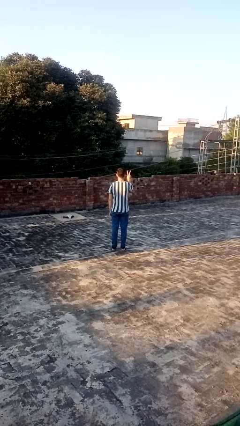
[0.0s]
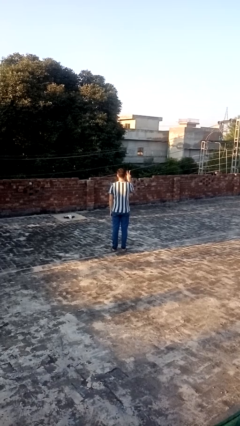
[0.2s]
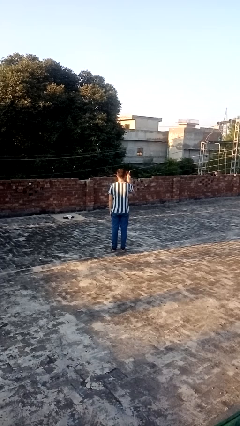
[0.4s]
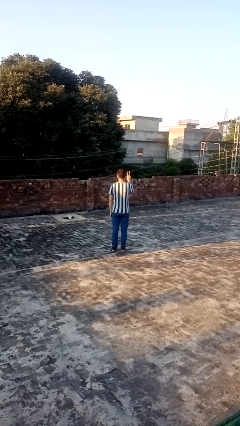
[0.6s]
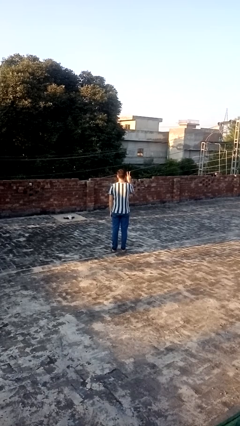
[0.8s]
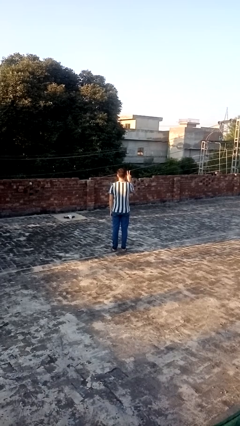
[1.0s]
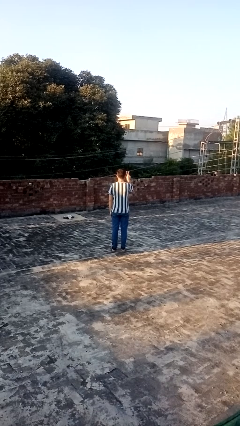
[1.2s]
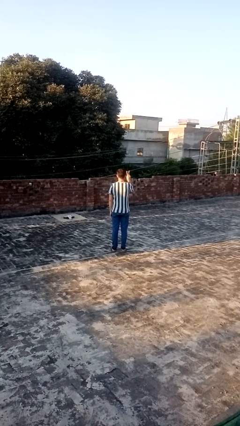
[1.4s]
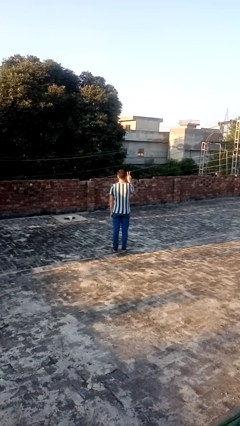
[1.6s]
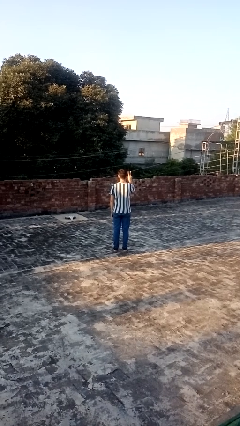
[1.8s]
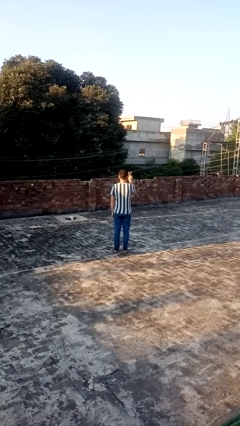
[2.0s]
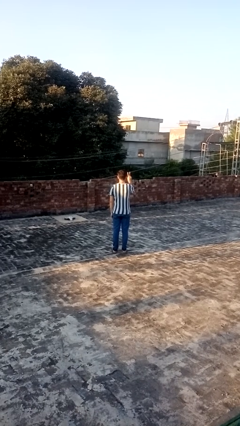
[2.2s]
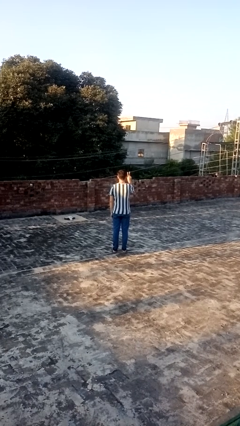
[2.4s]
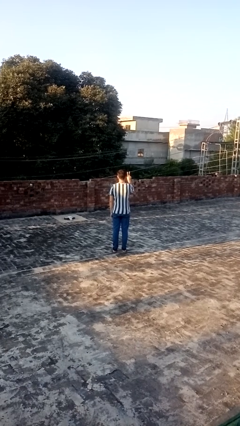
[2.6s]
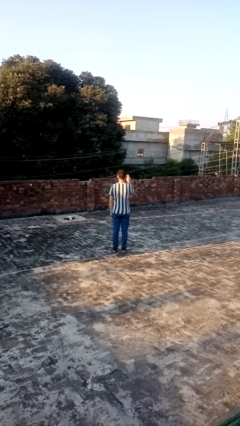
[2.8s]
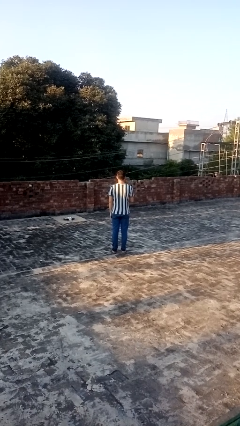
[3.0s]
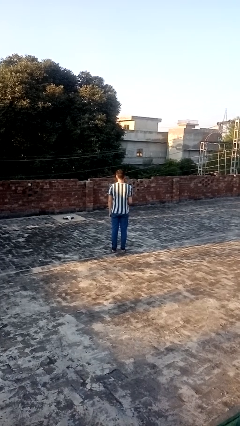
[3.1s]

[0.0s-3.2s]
person gestures peace

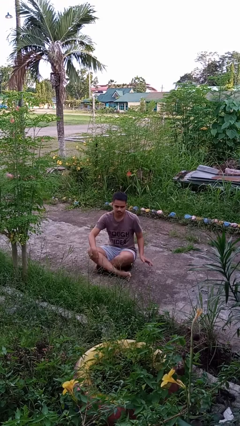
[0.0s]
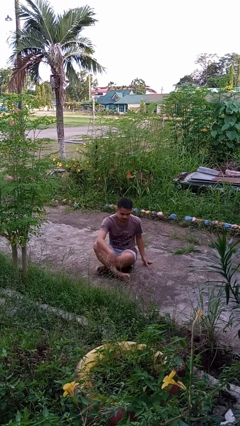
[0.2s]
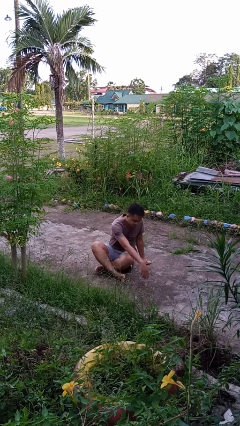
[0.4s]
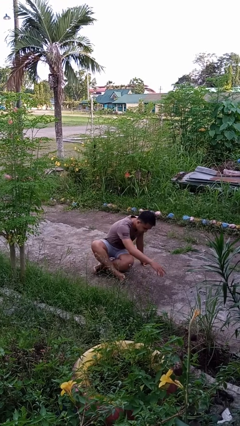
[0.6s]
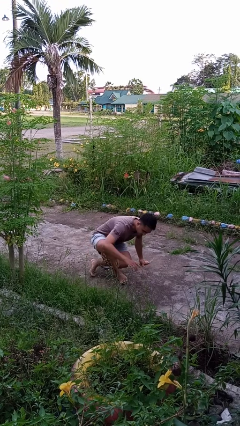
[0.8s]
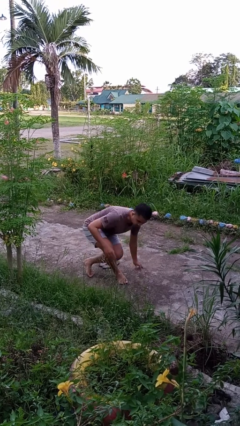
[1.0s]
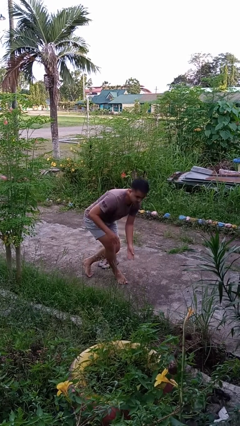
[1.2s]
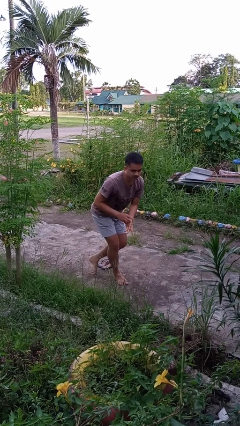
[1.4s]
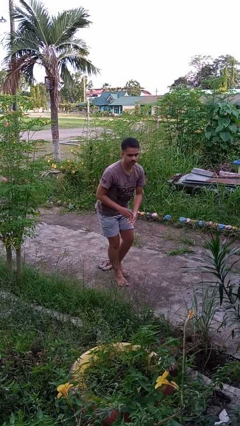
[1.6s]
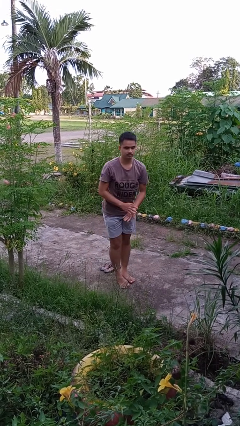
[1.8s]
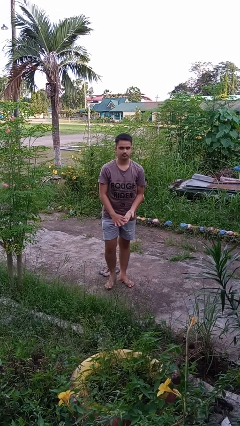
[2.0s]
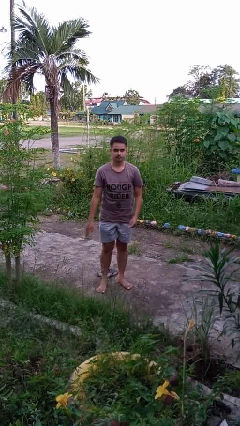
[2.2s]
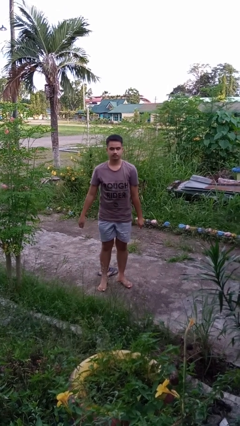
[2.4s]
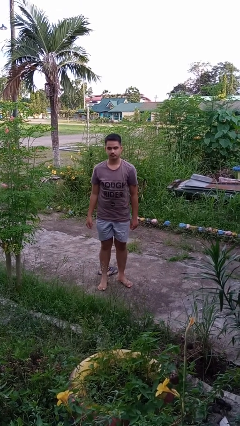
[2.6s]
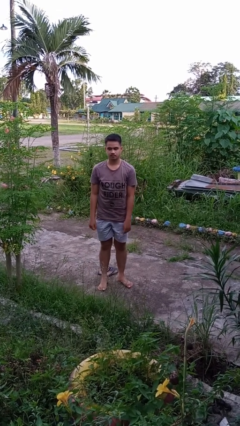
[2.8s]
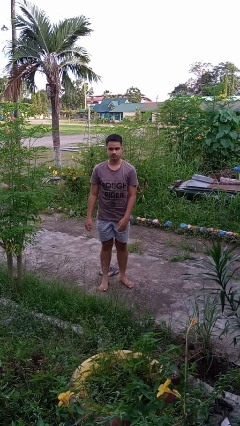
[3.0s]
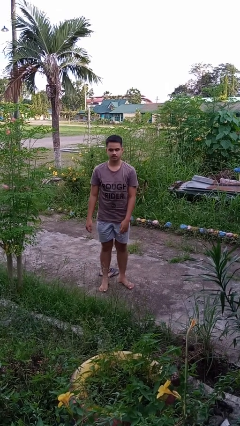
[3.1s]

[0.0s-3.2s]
person stands up from floor

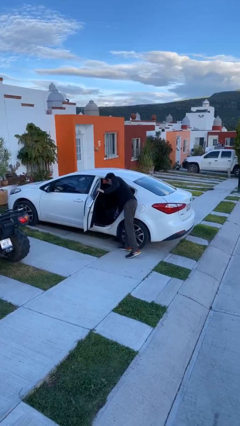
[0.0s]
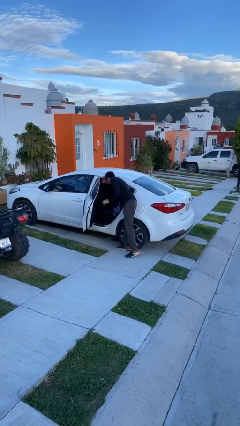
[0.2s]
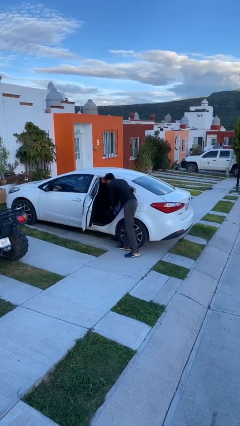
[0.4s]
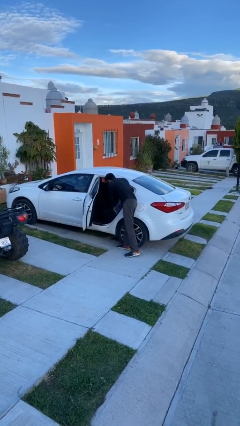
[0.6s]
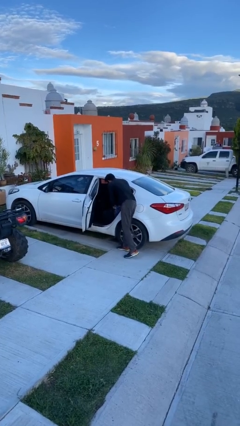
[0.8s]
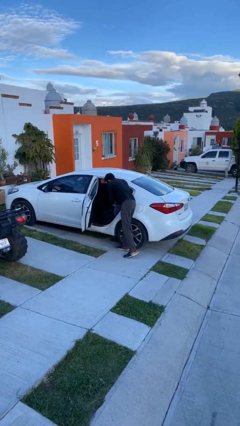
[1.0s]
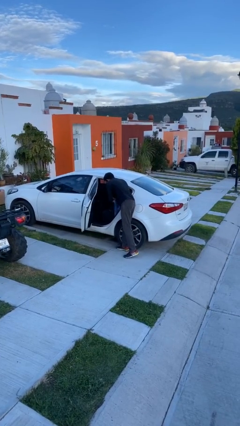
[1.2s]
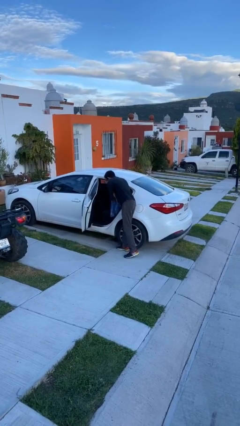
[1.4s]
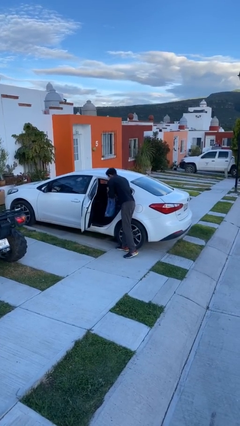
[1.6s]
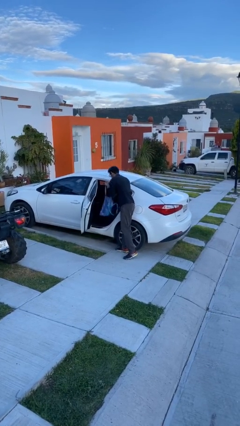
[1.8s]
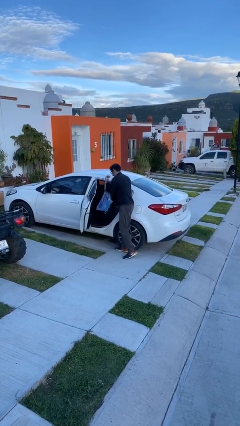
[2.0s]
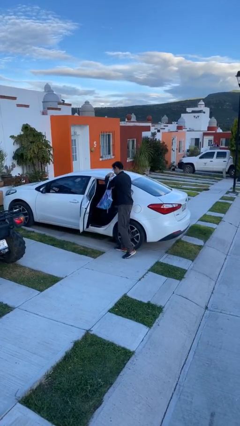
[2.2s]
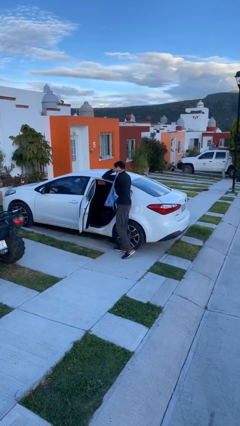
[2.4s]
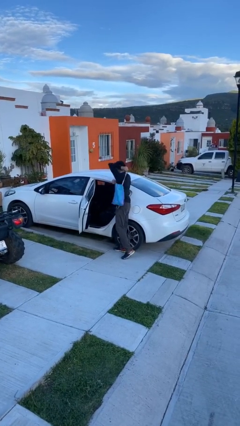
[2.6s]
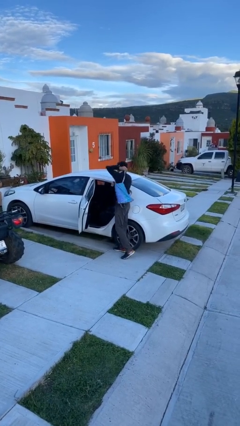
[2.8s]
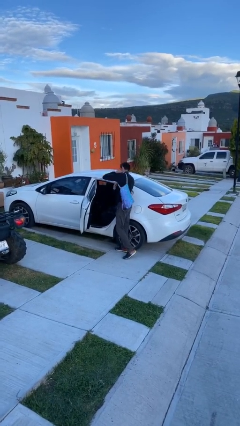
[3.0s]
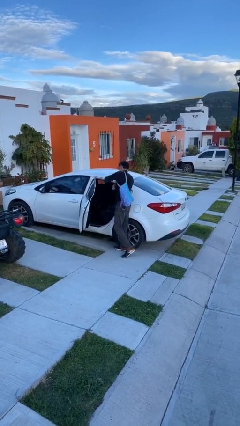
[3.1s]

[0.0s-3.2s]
person unloads car

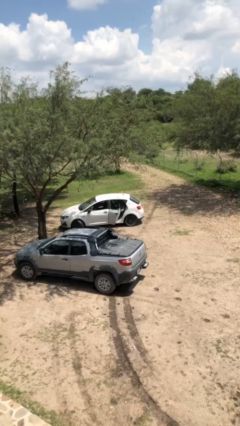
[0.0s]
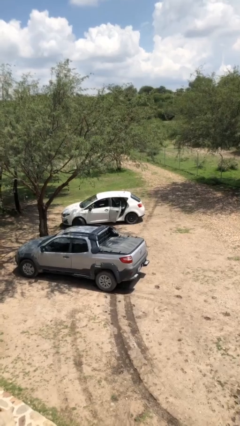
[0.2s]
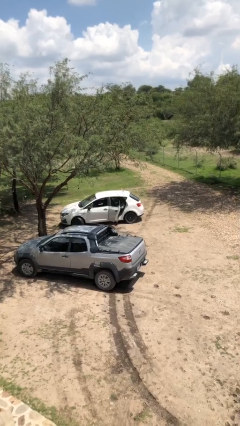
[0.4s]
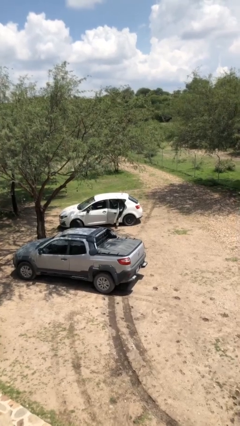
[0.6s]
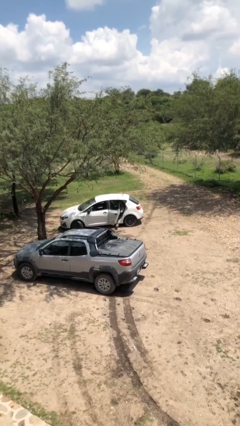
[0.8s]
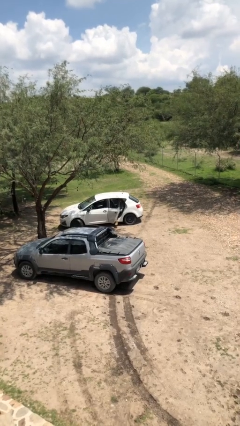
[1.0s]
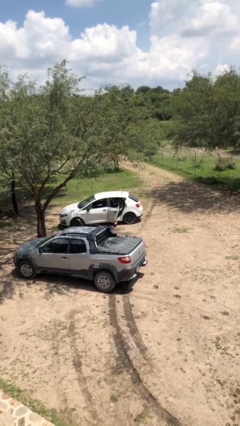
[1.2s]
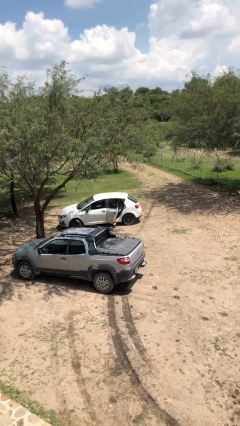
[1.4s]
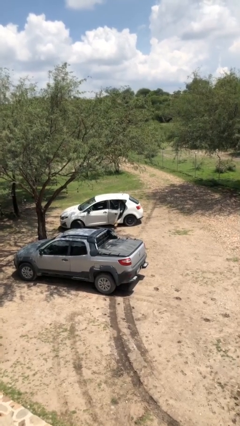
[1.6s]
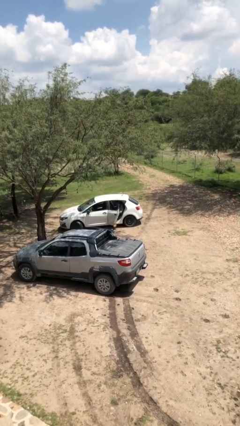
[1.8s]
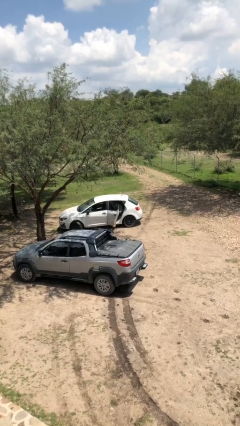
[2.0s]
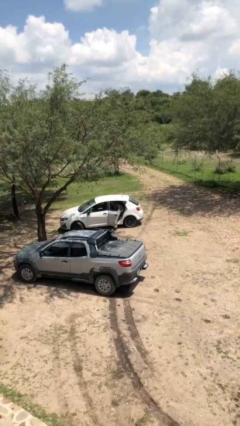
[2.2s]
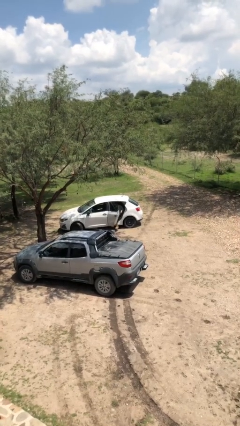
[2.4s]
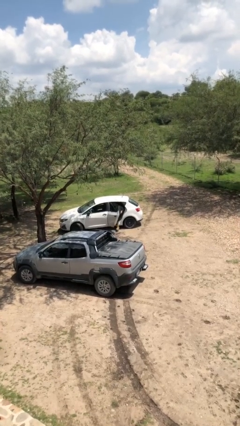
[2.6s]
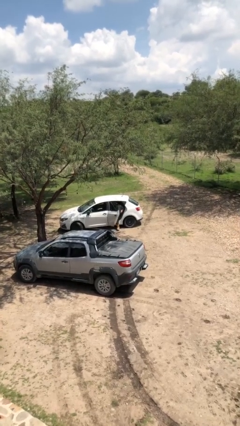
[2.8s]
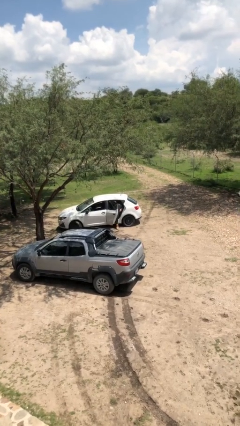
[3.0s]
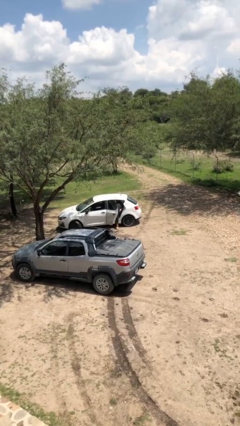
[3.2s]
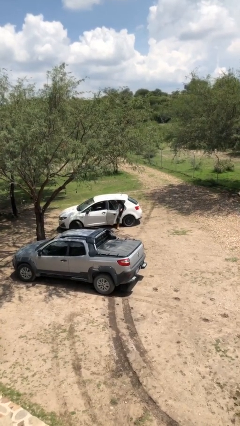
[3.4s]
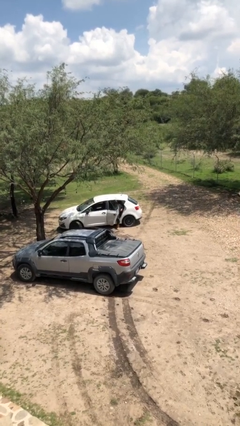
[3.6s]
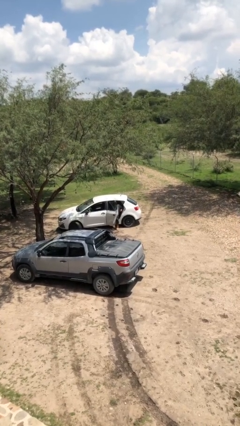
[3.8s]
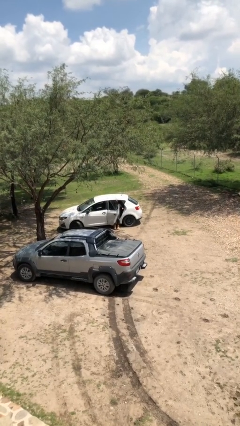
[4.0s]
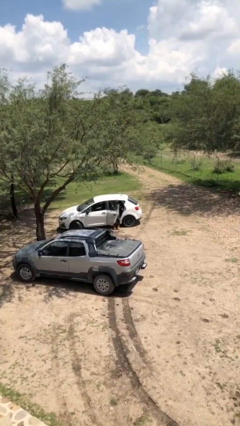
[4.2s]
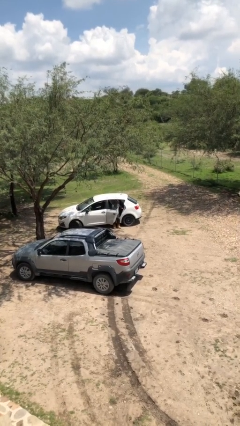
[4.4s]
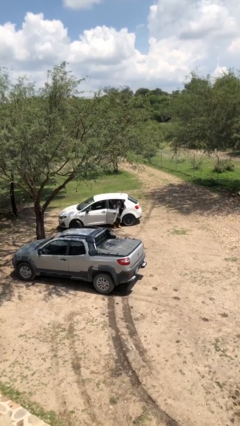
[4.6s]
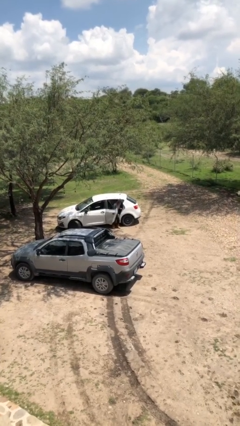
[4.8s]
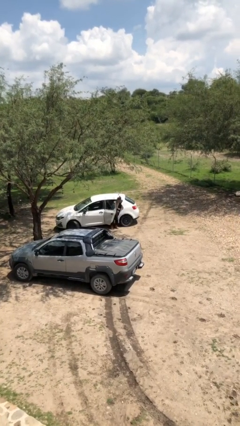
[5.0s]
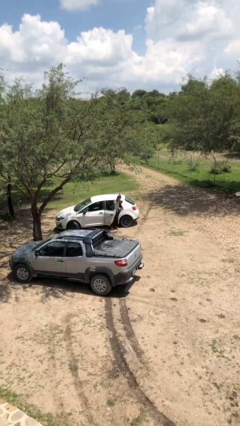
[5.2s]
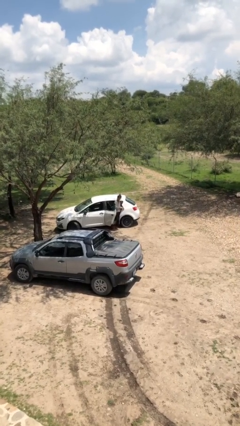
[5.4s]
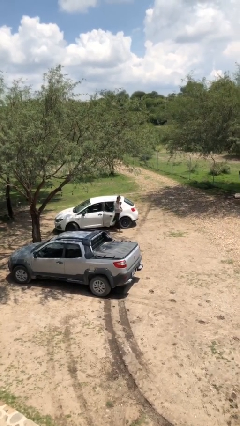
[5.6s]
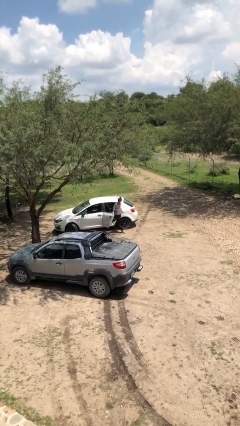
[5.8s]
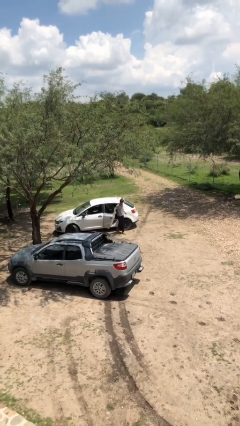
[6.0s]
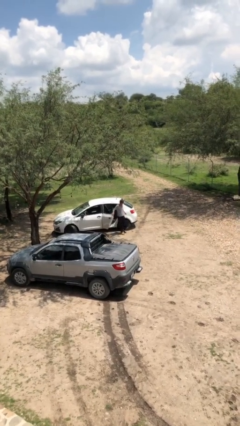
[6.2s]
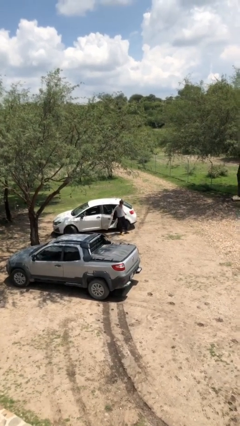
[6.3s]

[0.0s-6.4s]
person exits car

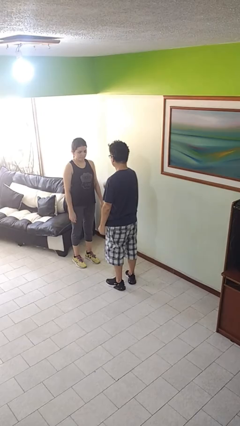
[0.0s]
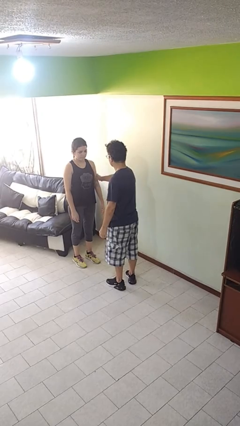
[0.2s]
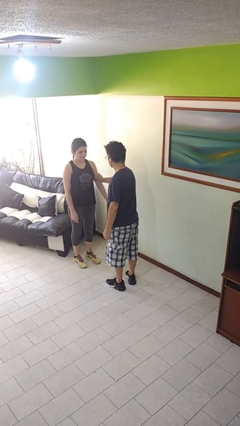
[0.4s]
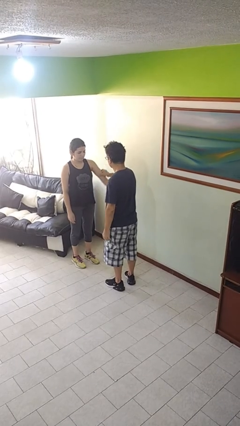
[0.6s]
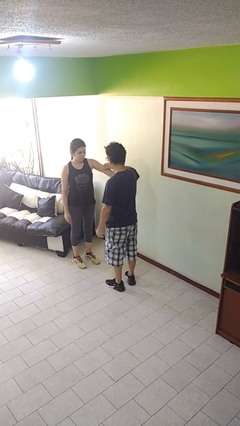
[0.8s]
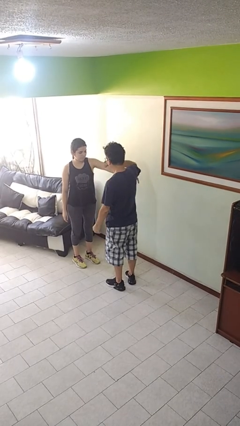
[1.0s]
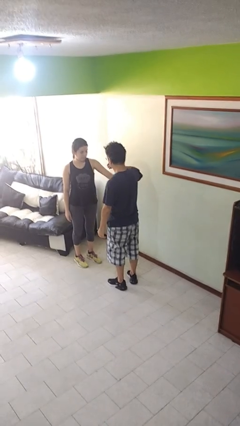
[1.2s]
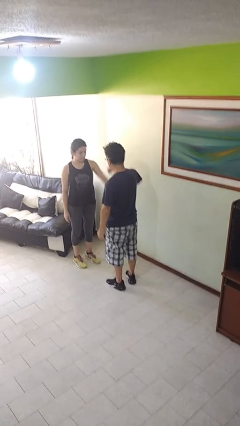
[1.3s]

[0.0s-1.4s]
person grabs person by bicep
